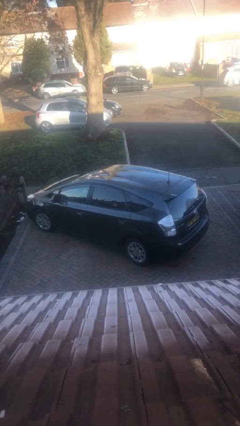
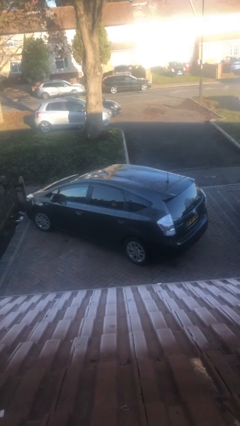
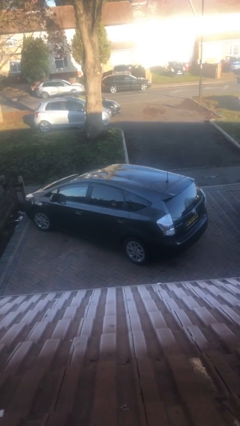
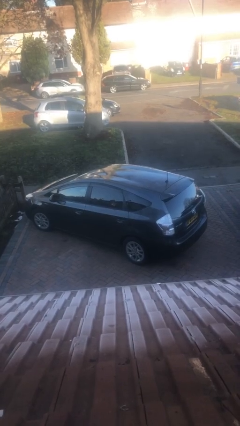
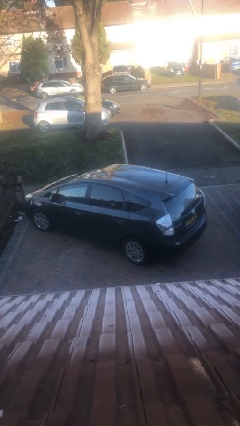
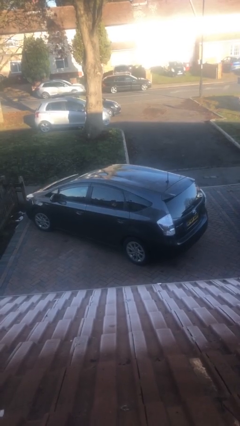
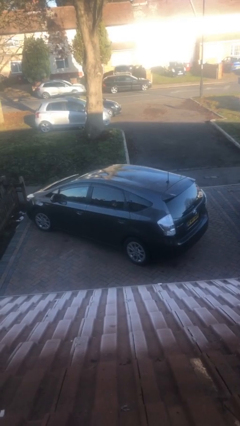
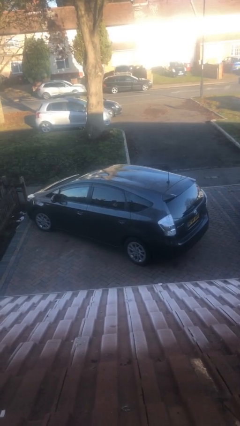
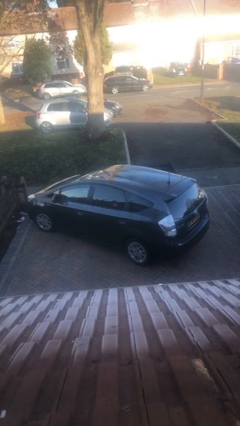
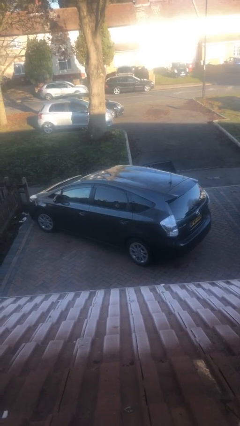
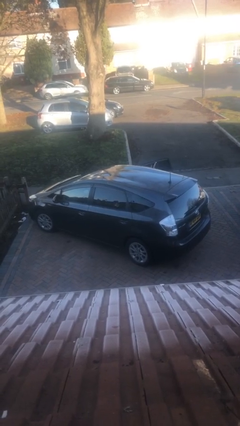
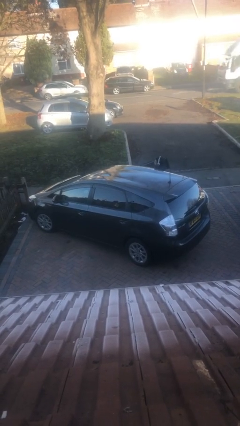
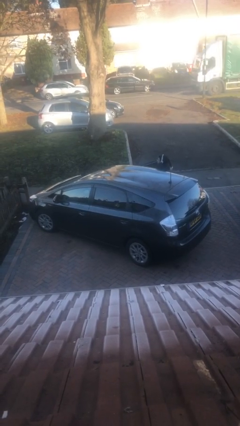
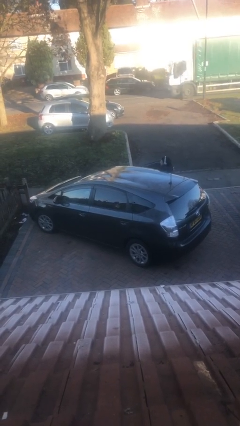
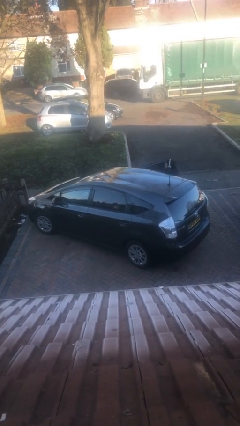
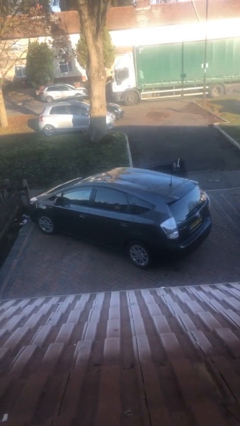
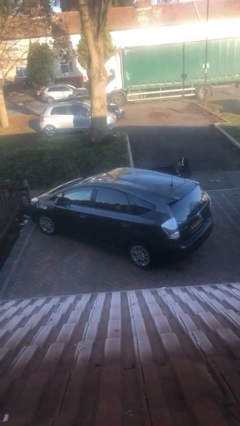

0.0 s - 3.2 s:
car drops off person

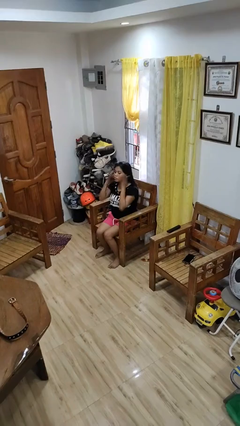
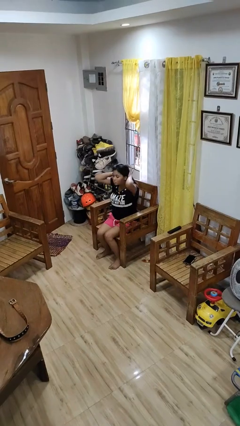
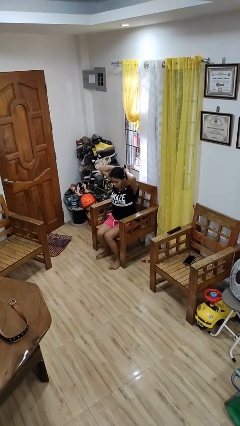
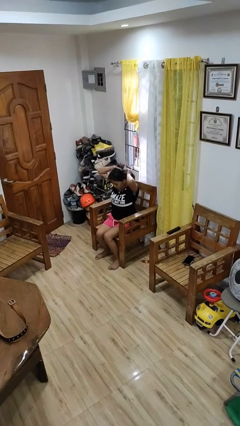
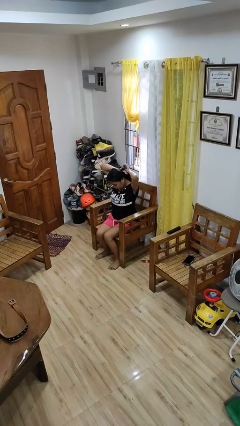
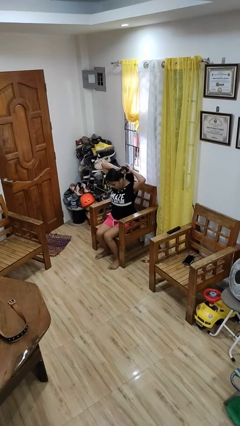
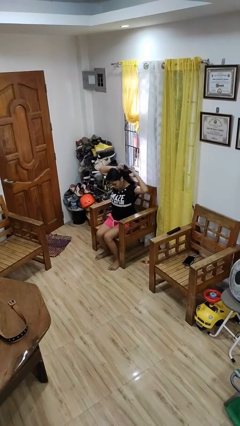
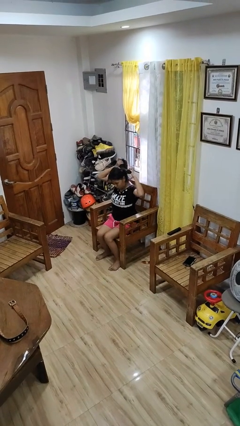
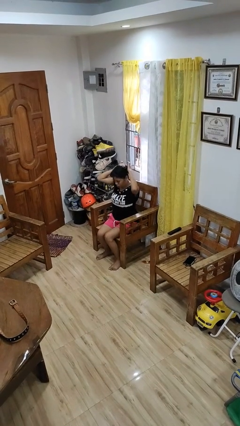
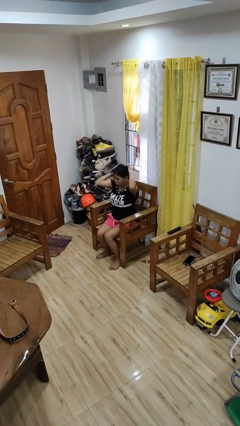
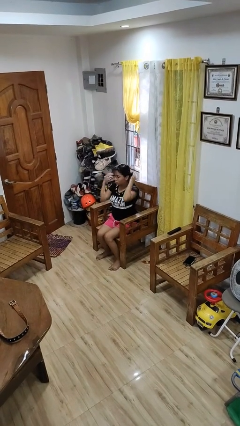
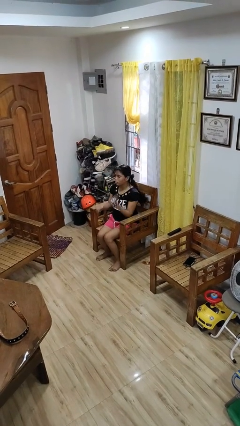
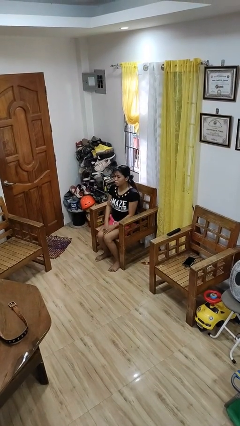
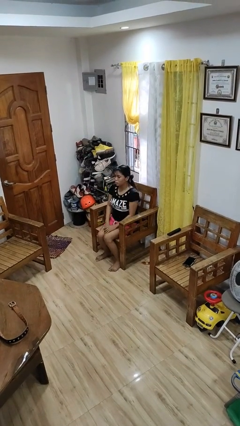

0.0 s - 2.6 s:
person puts hair in ponytail

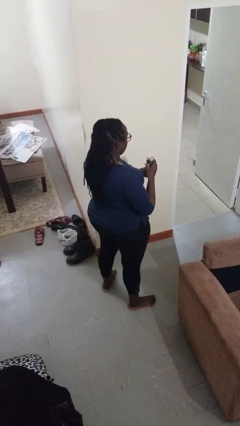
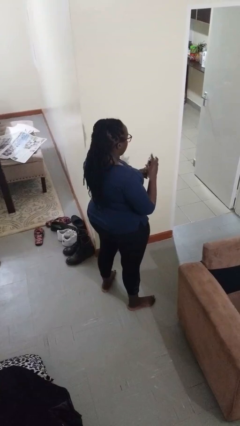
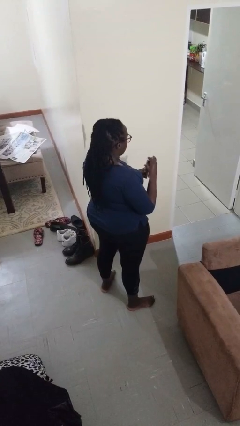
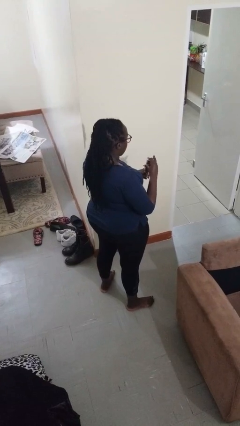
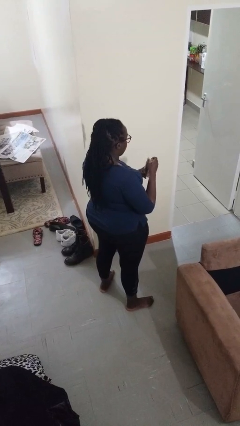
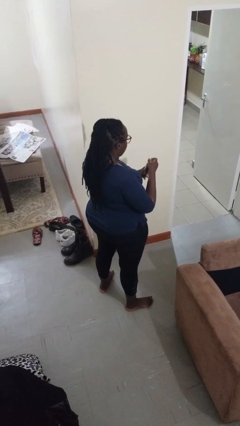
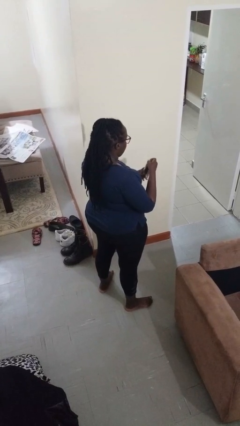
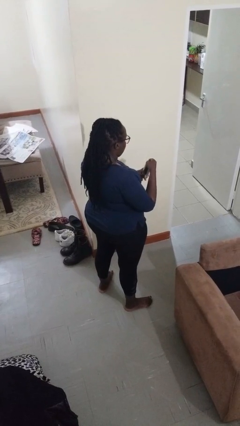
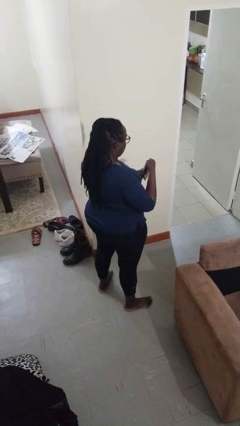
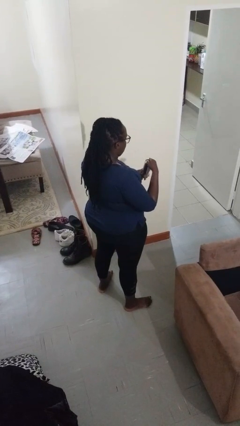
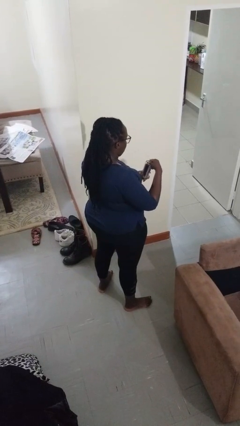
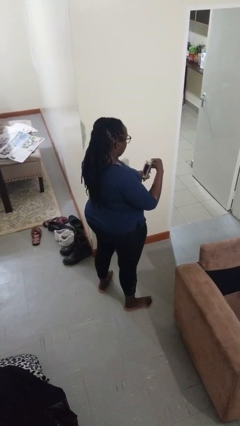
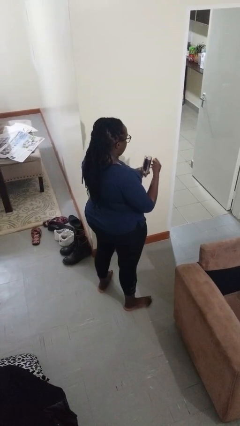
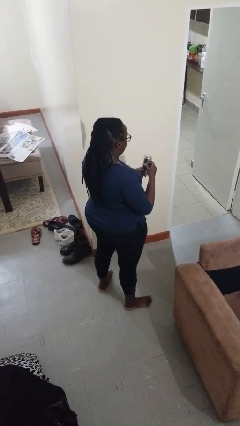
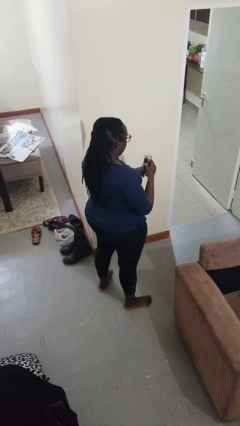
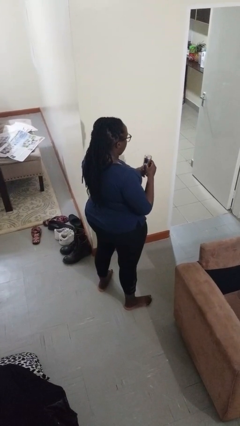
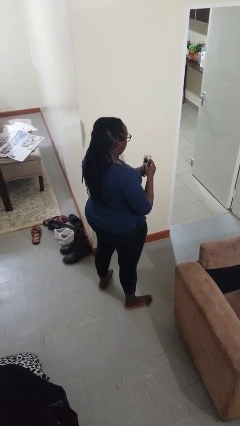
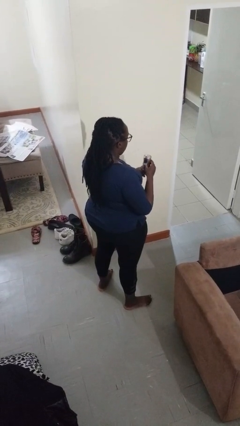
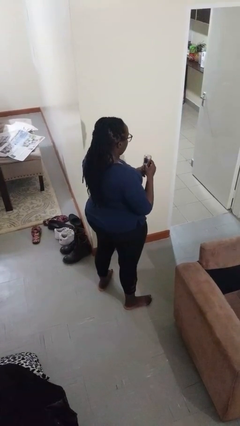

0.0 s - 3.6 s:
person opens beverage can

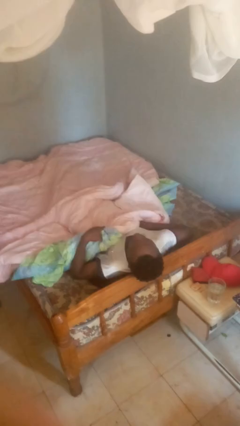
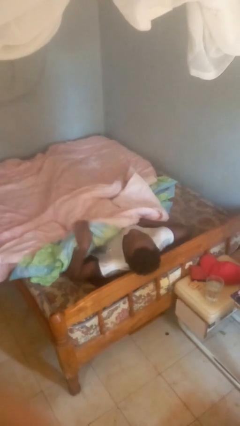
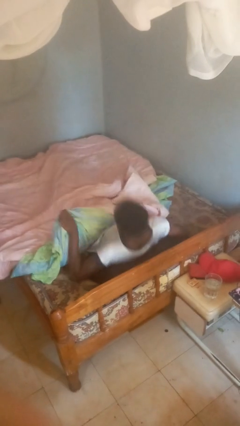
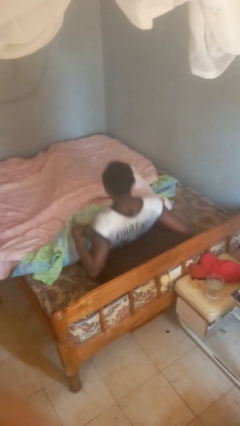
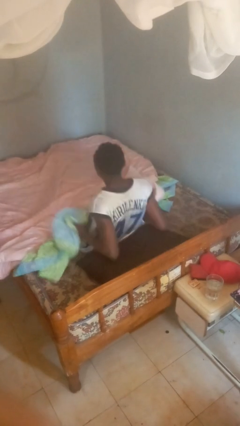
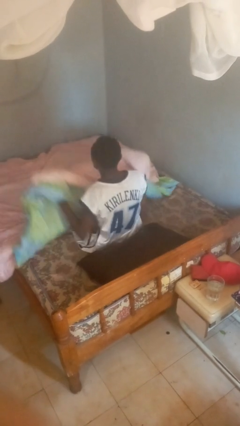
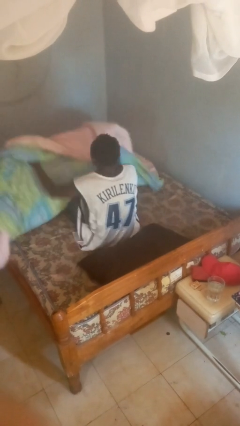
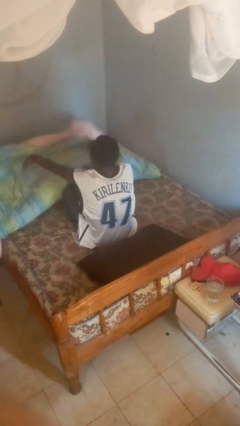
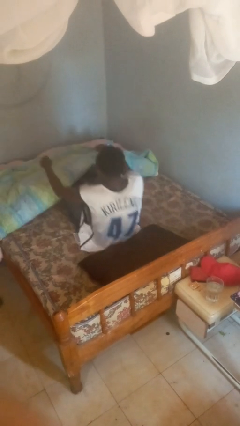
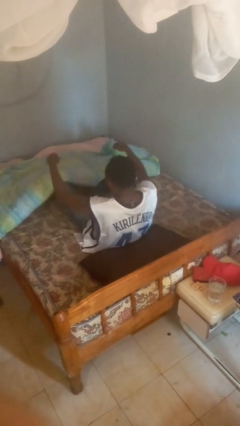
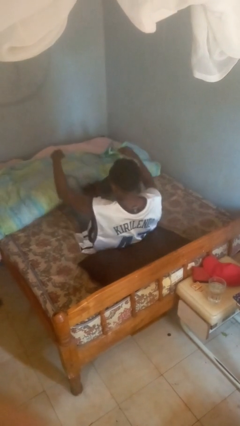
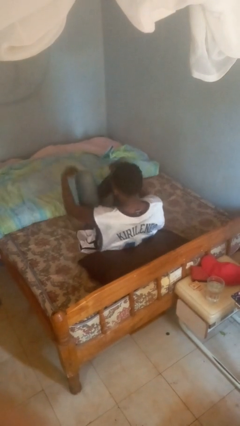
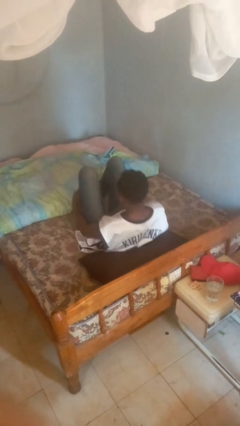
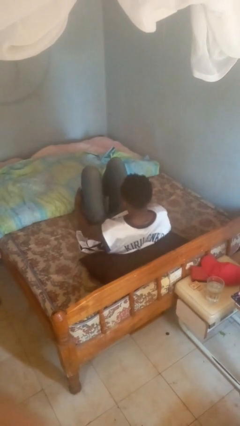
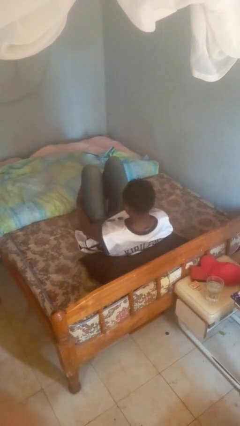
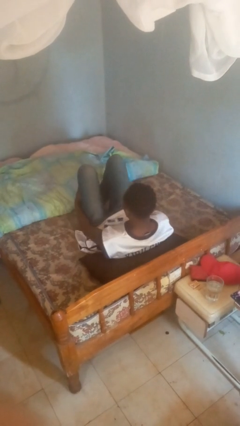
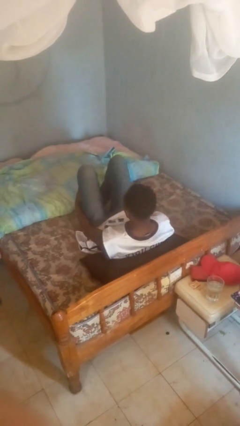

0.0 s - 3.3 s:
person uncovers with bedsheets

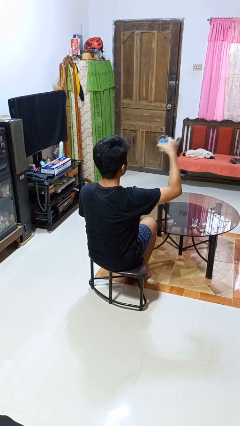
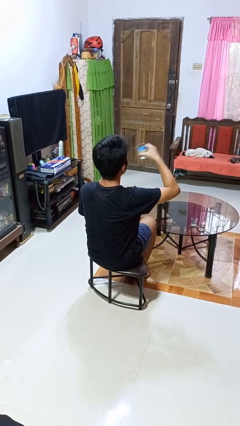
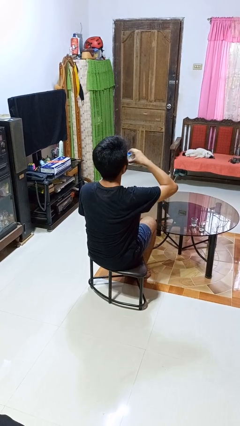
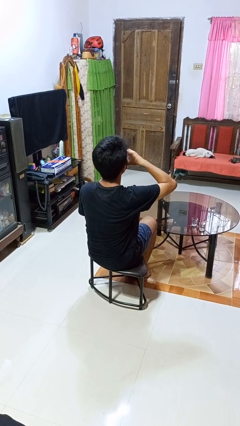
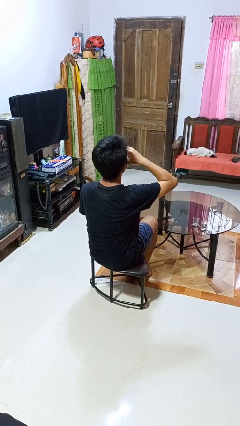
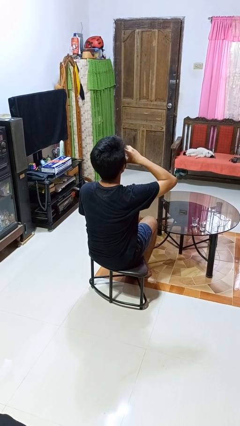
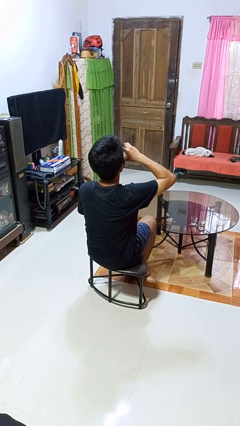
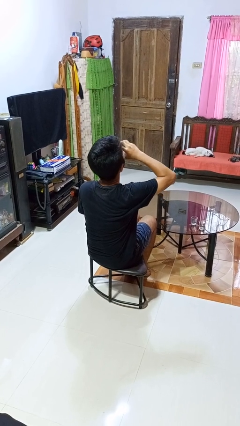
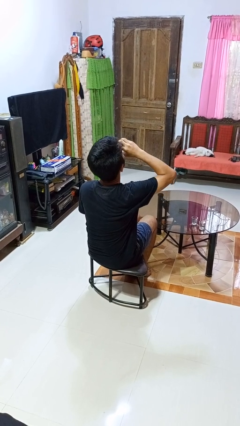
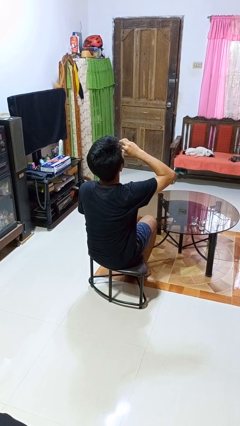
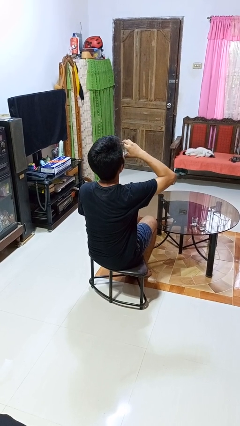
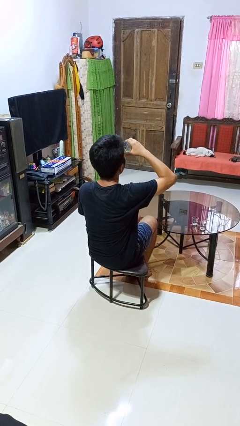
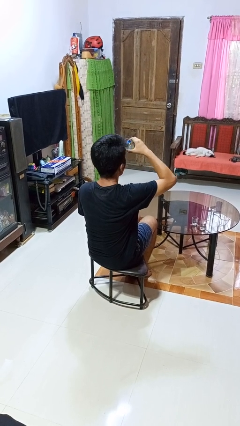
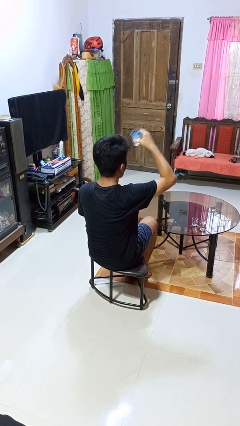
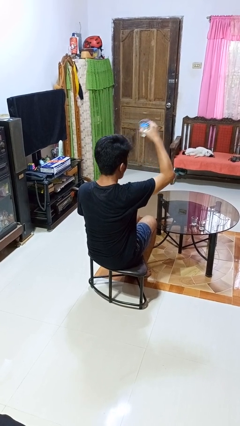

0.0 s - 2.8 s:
person drinks from shotglass

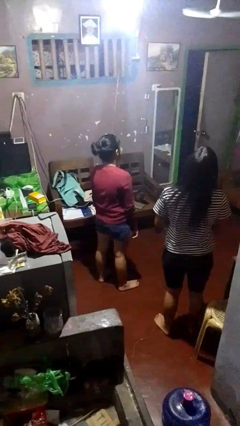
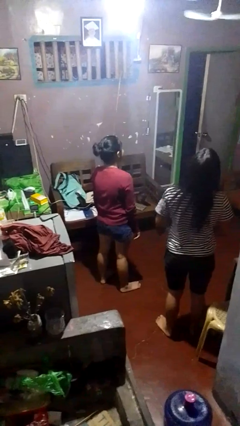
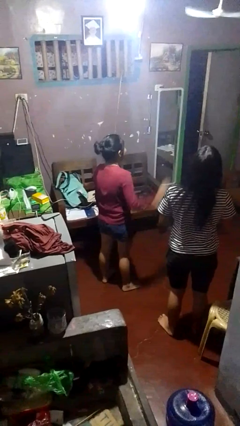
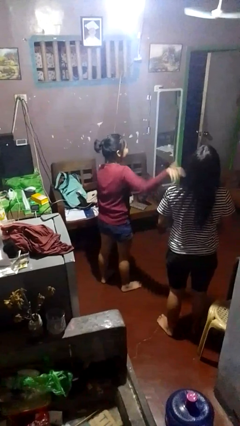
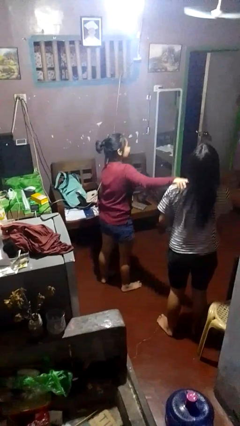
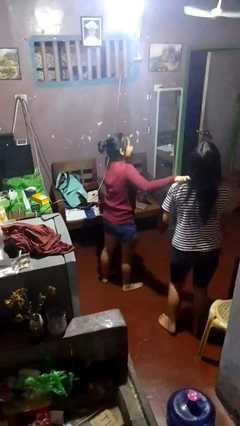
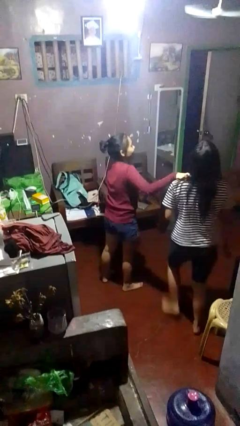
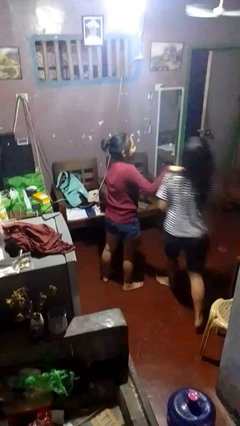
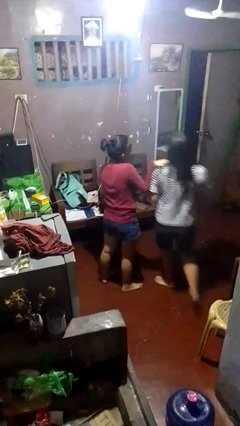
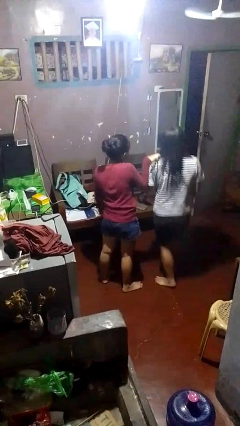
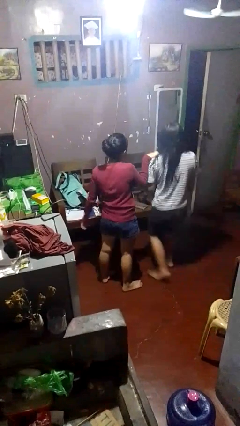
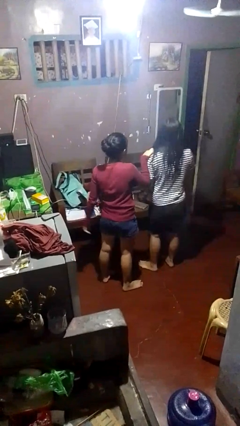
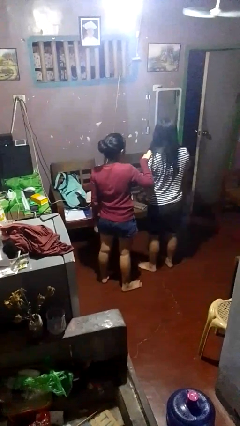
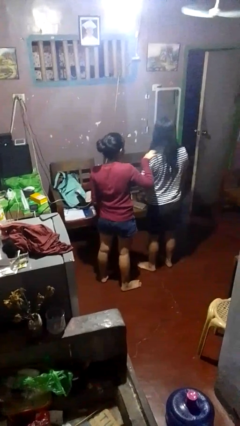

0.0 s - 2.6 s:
person grabs person by shoulder
